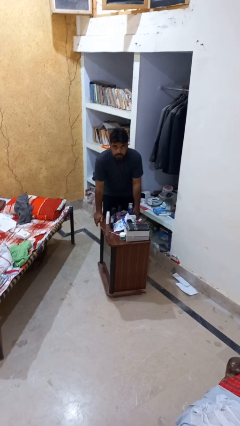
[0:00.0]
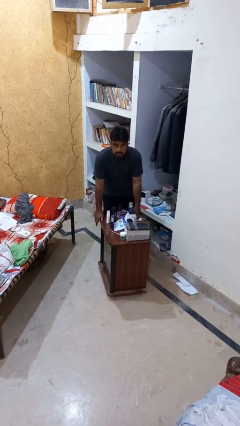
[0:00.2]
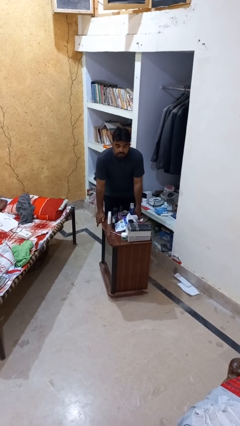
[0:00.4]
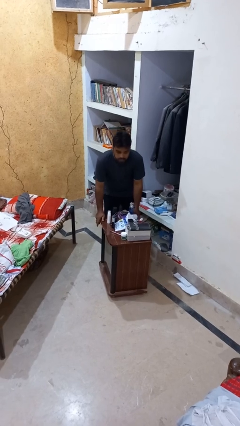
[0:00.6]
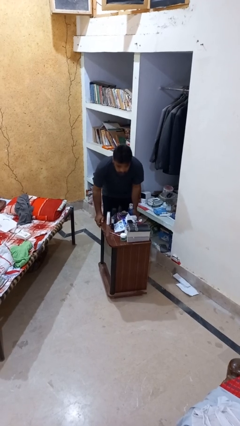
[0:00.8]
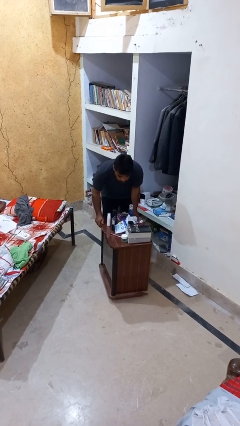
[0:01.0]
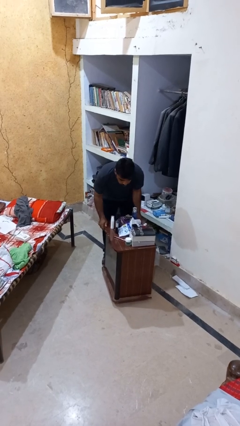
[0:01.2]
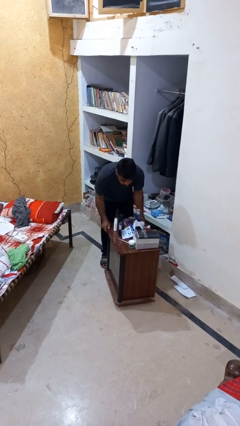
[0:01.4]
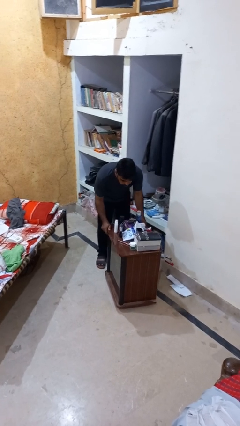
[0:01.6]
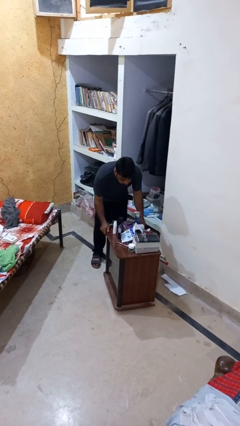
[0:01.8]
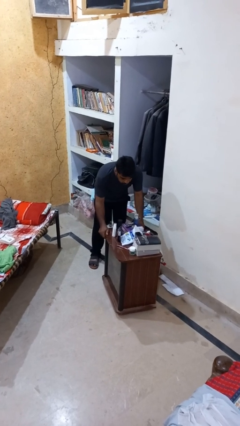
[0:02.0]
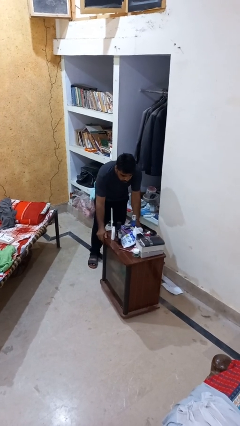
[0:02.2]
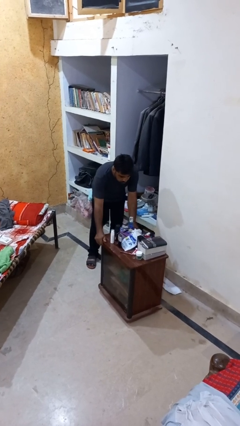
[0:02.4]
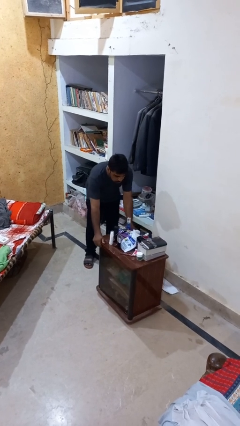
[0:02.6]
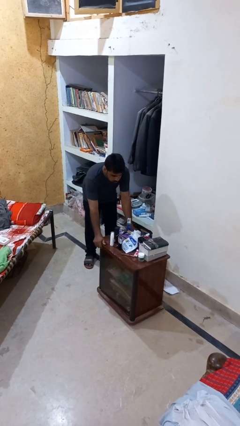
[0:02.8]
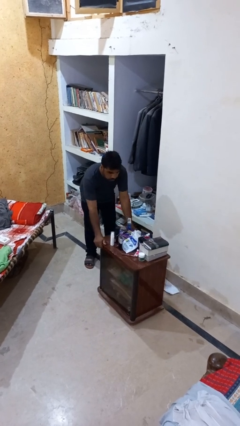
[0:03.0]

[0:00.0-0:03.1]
person pushes wheeled cart

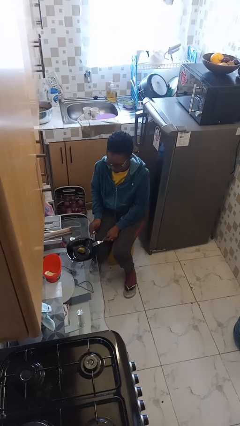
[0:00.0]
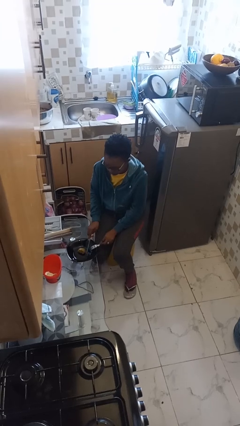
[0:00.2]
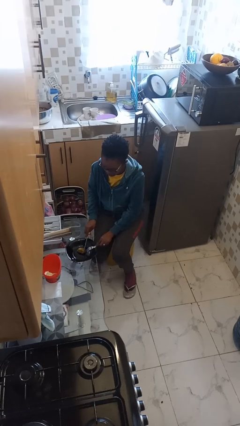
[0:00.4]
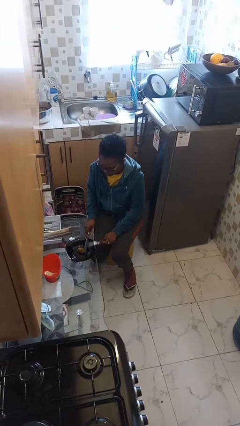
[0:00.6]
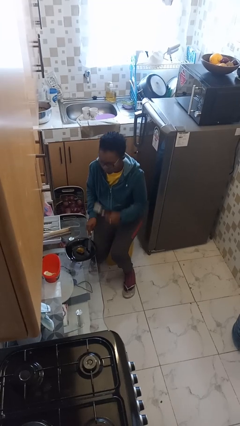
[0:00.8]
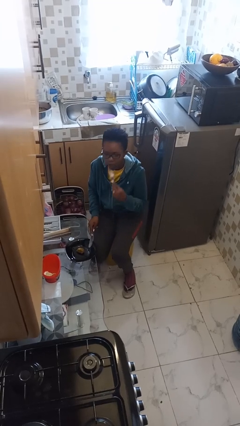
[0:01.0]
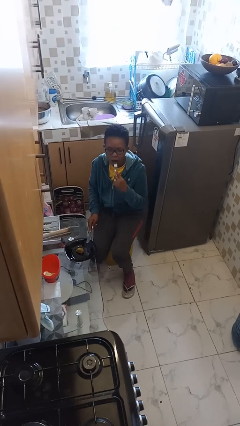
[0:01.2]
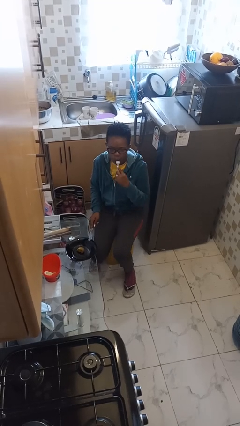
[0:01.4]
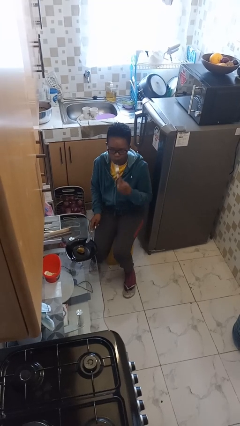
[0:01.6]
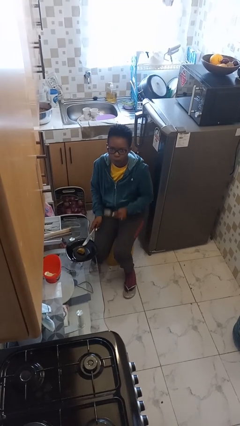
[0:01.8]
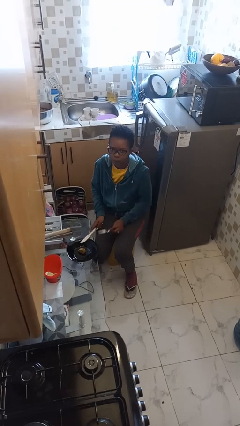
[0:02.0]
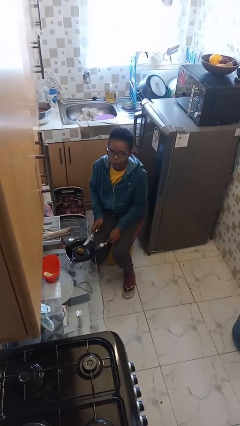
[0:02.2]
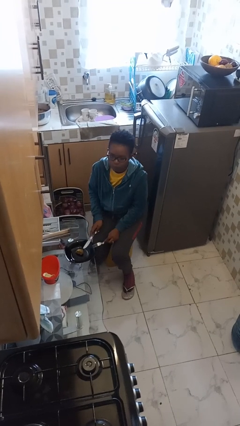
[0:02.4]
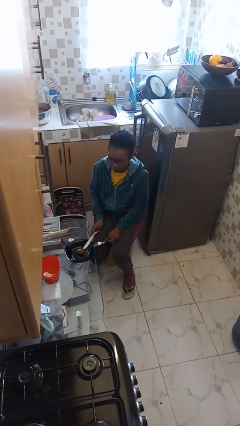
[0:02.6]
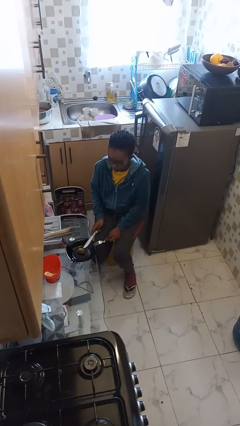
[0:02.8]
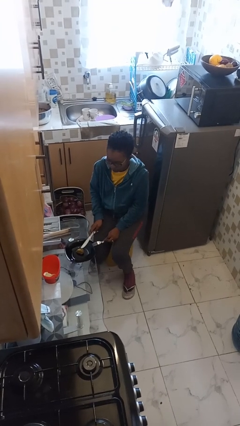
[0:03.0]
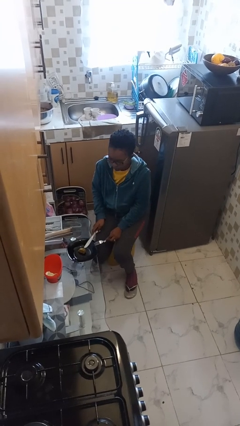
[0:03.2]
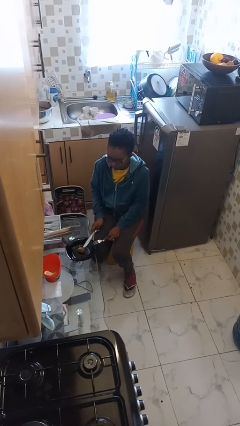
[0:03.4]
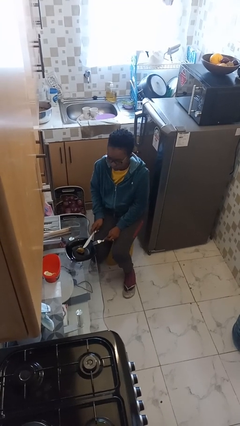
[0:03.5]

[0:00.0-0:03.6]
person eats with utensil

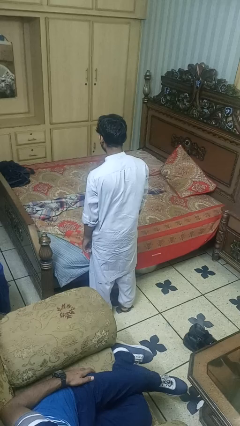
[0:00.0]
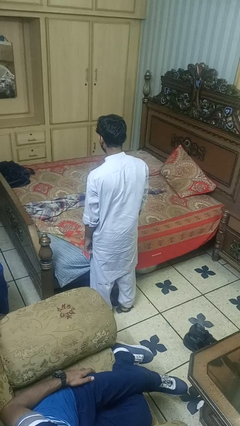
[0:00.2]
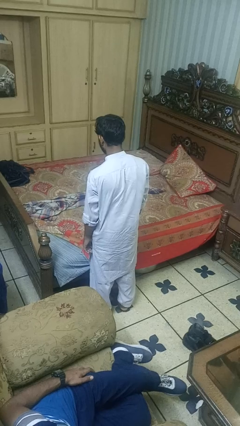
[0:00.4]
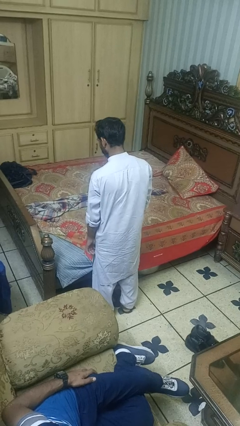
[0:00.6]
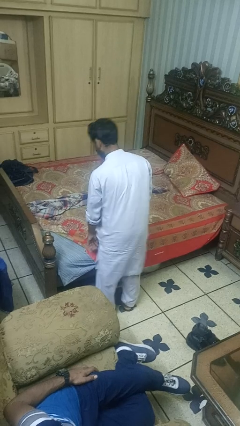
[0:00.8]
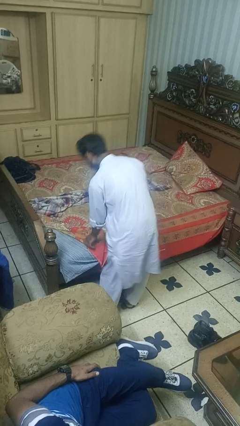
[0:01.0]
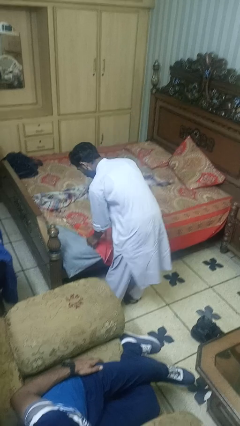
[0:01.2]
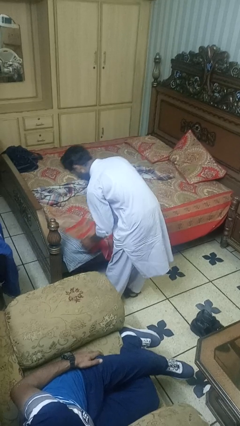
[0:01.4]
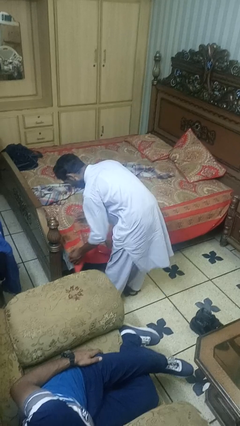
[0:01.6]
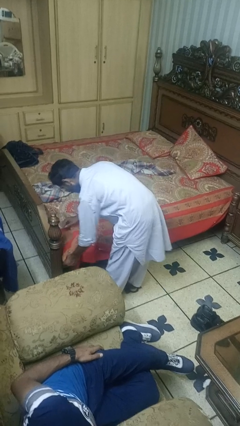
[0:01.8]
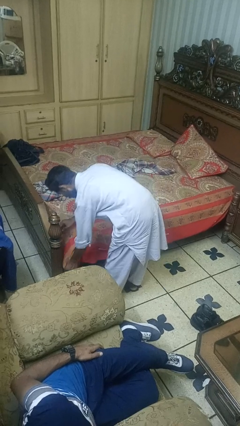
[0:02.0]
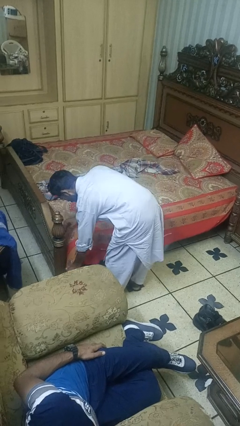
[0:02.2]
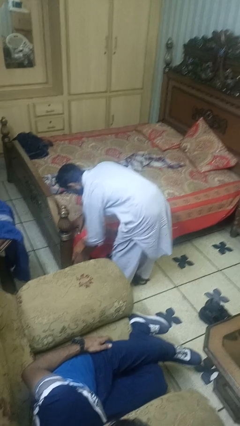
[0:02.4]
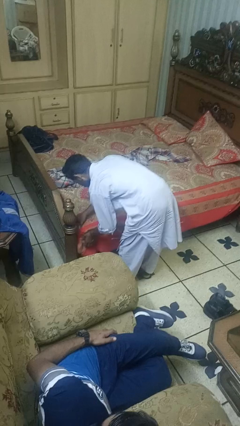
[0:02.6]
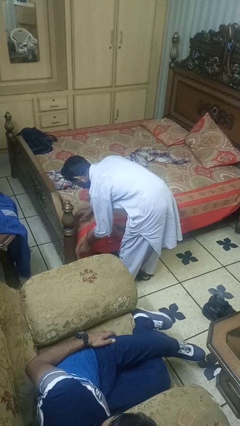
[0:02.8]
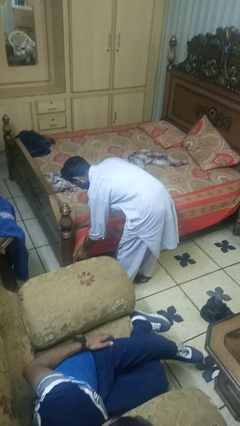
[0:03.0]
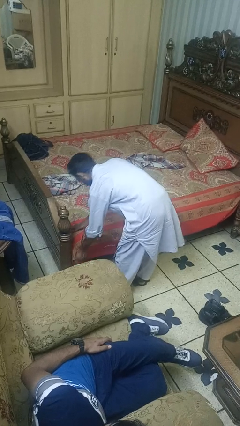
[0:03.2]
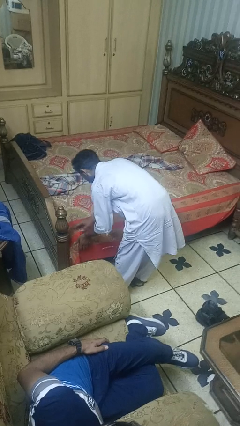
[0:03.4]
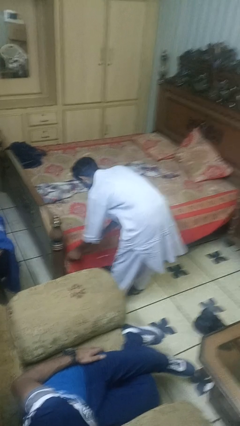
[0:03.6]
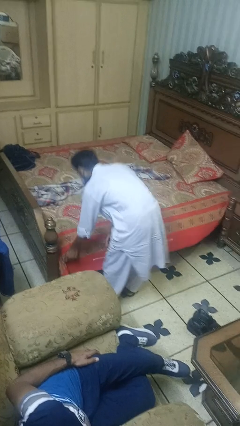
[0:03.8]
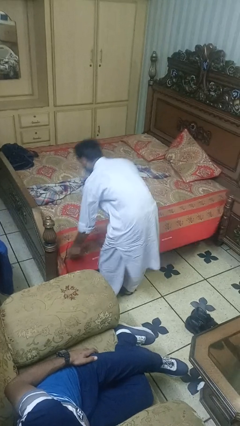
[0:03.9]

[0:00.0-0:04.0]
person makes bed

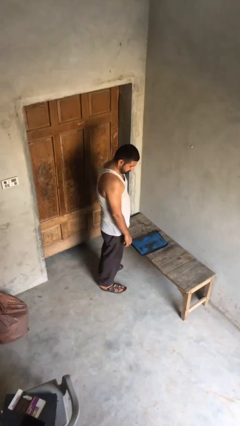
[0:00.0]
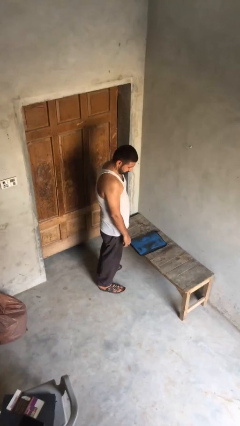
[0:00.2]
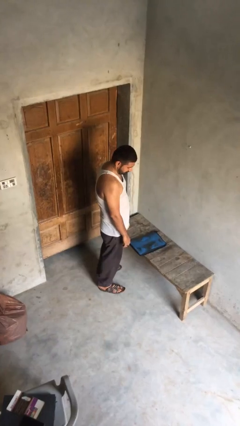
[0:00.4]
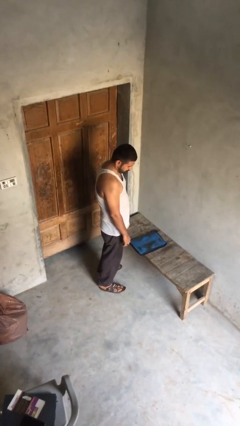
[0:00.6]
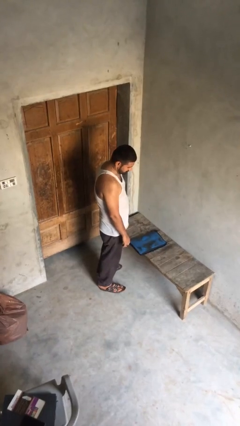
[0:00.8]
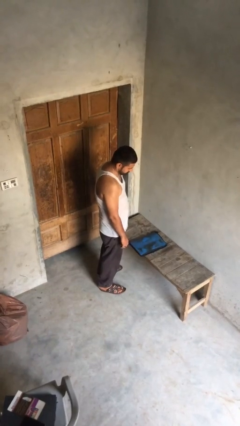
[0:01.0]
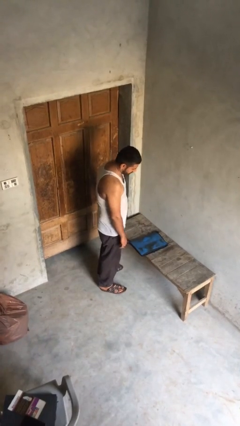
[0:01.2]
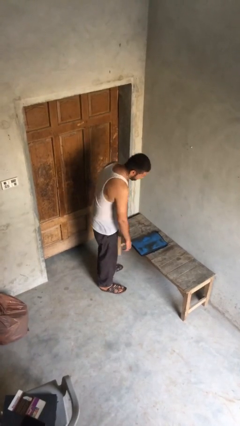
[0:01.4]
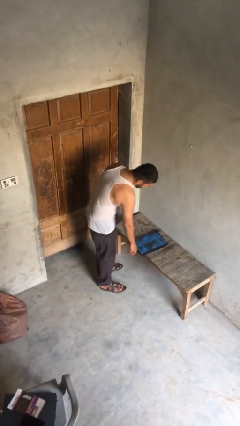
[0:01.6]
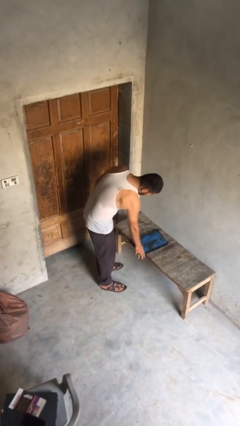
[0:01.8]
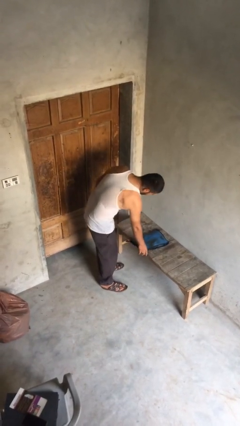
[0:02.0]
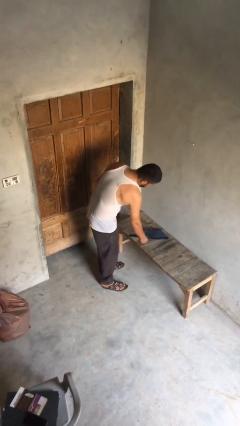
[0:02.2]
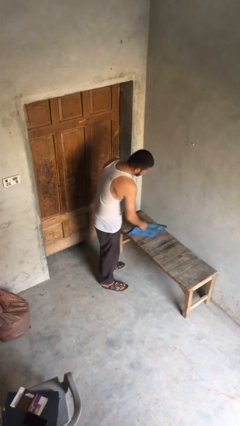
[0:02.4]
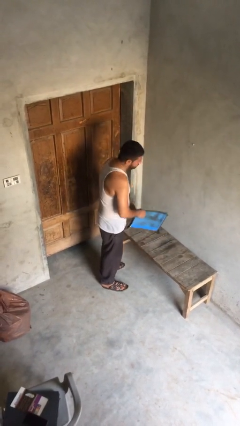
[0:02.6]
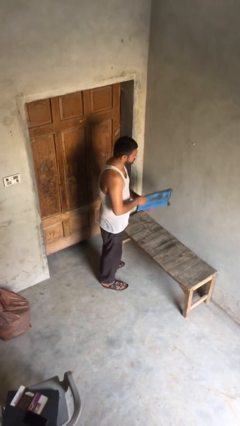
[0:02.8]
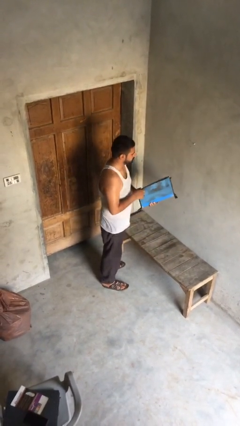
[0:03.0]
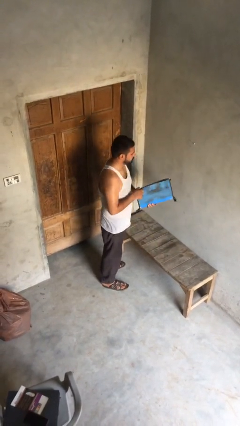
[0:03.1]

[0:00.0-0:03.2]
person picks up object from table

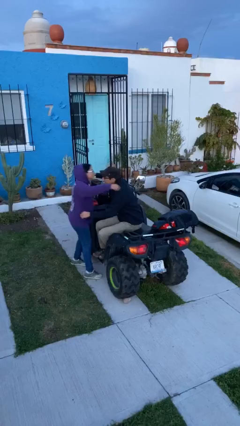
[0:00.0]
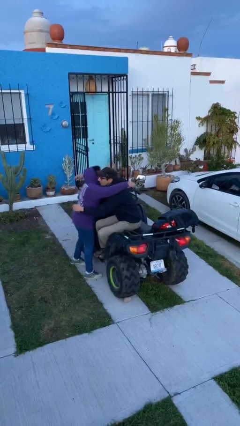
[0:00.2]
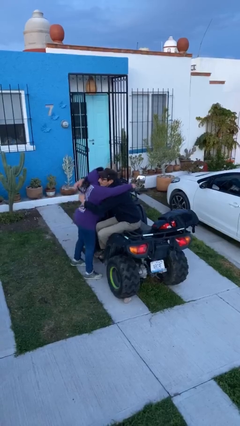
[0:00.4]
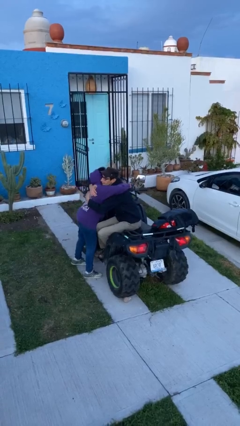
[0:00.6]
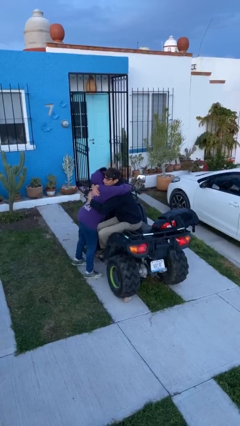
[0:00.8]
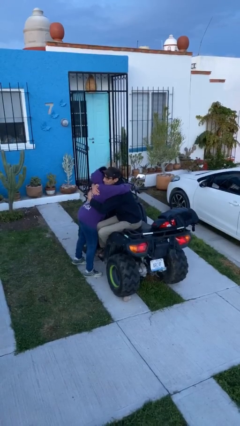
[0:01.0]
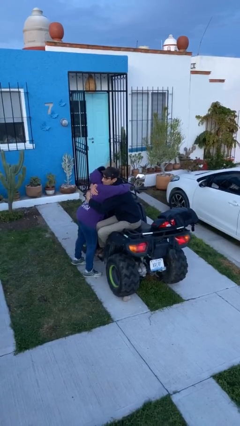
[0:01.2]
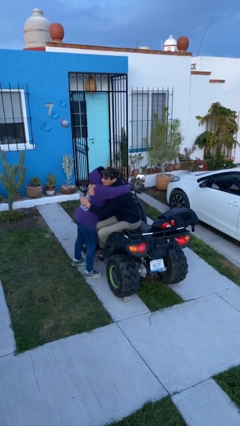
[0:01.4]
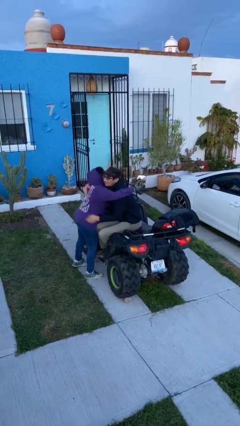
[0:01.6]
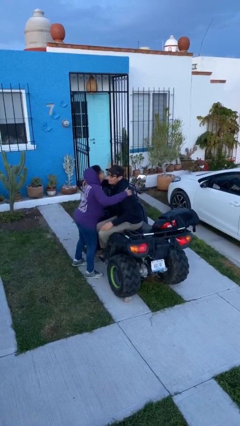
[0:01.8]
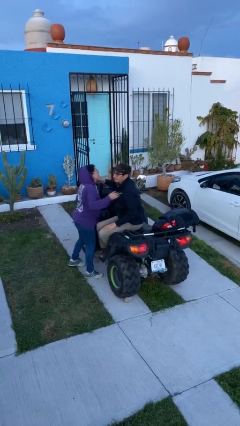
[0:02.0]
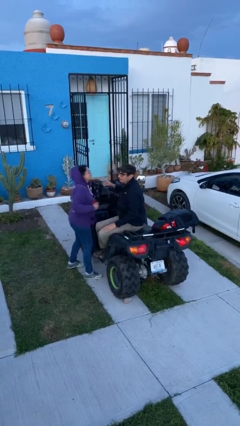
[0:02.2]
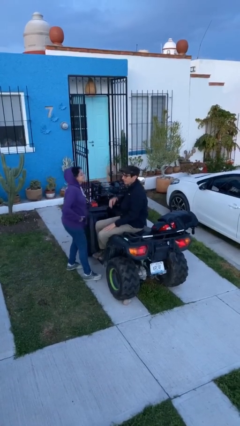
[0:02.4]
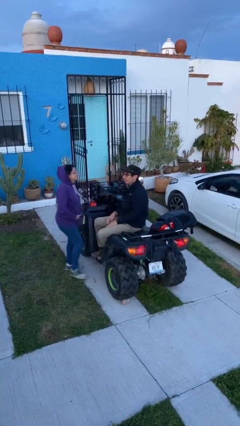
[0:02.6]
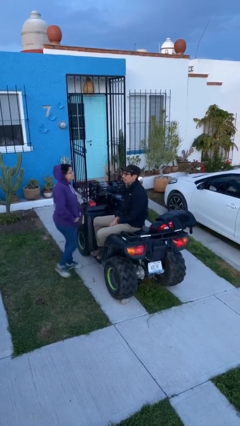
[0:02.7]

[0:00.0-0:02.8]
person embraces person

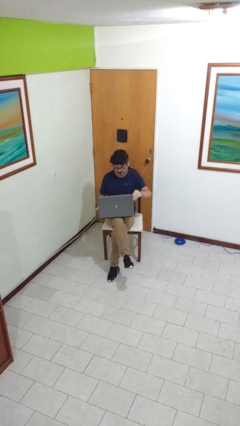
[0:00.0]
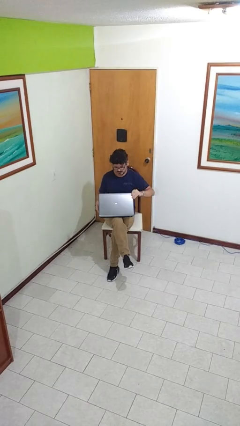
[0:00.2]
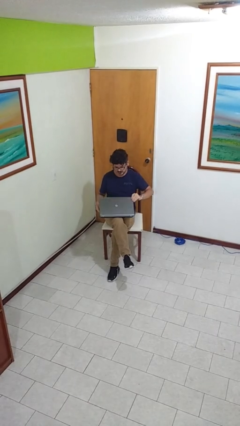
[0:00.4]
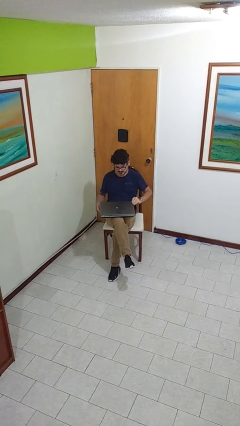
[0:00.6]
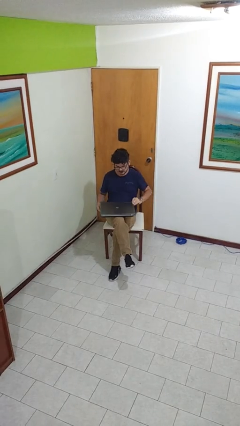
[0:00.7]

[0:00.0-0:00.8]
person closes laptop

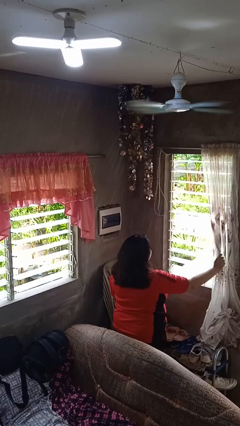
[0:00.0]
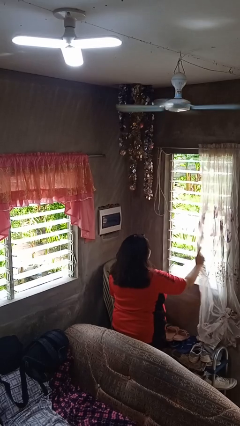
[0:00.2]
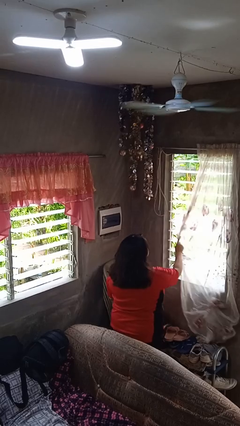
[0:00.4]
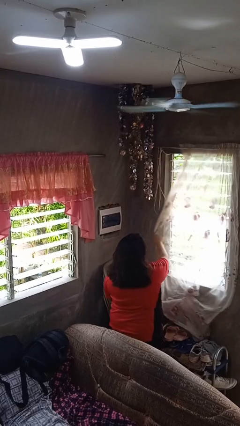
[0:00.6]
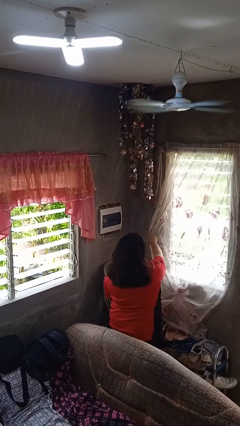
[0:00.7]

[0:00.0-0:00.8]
person closes curtains
